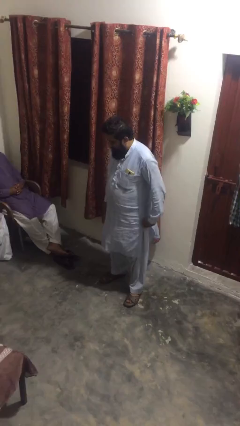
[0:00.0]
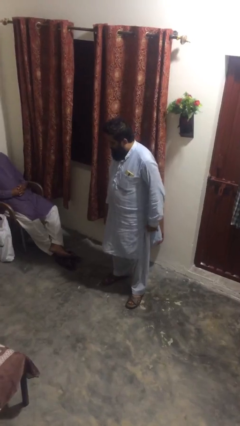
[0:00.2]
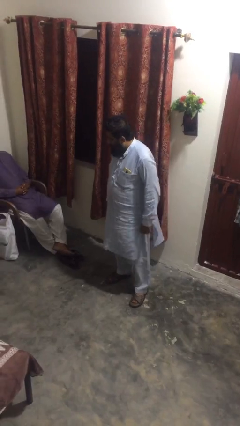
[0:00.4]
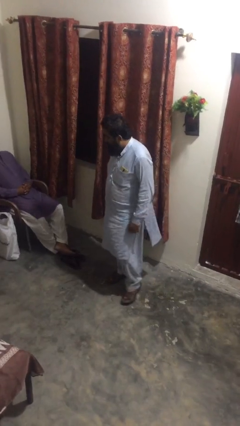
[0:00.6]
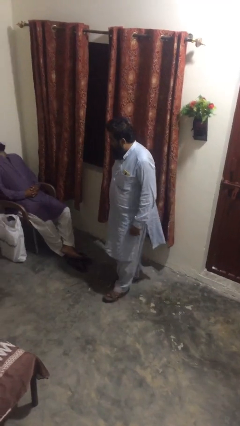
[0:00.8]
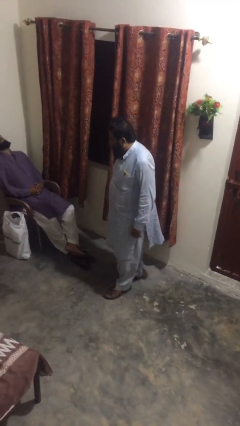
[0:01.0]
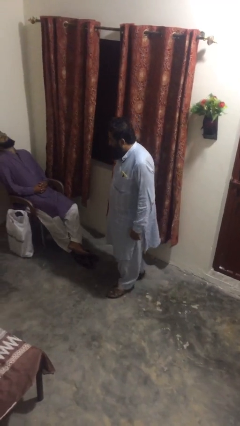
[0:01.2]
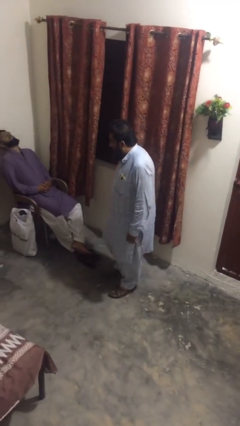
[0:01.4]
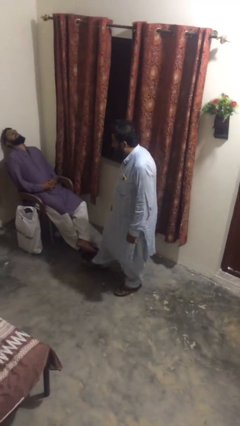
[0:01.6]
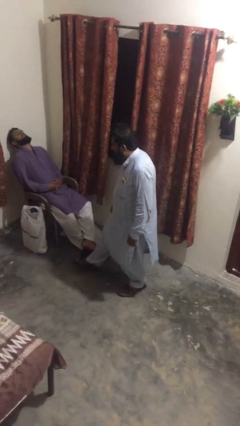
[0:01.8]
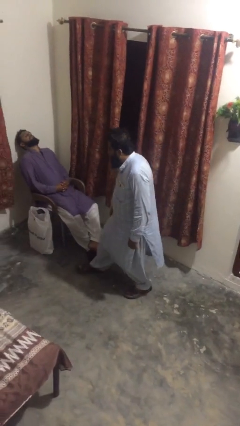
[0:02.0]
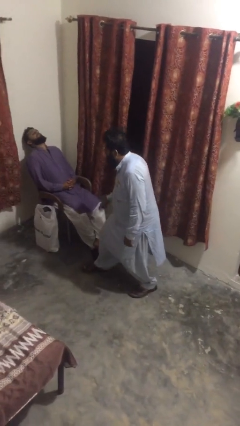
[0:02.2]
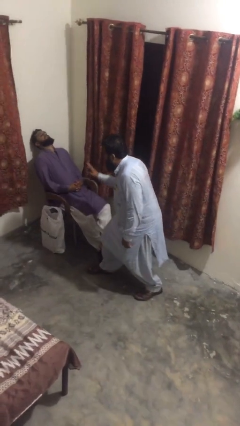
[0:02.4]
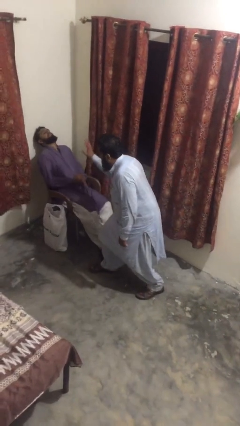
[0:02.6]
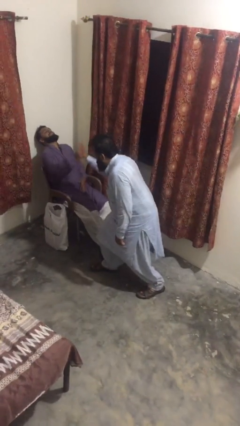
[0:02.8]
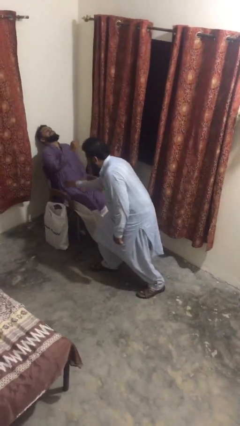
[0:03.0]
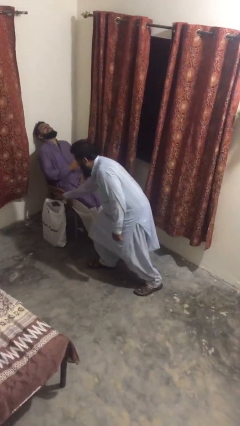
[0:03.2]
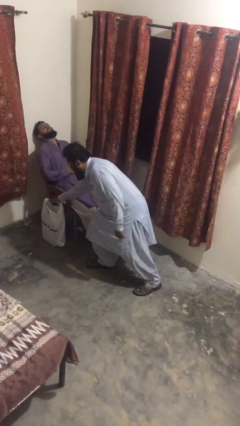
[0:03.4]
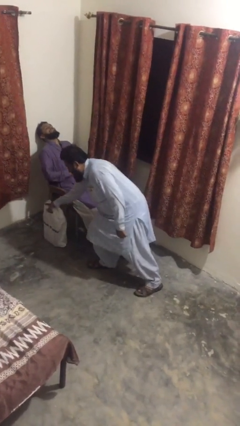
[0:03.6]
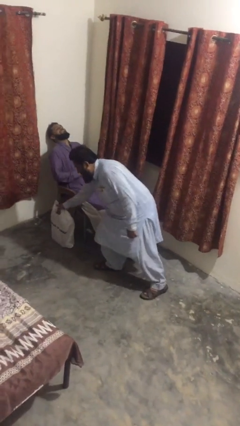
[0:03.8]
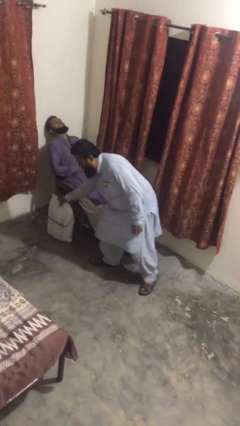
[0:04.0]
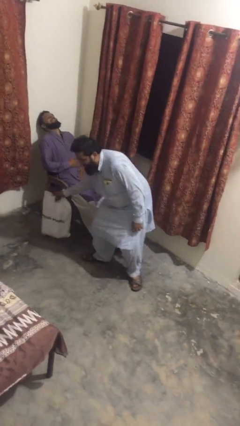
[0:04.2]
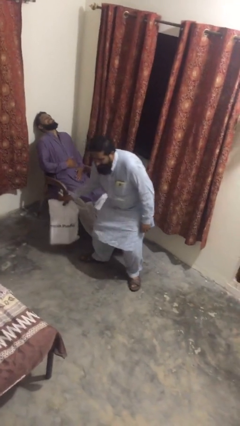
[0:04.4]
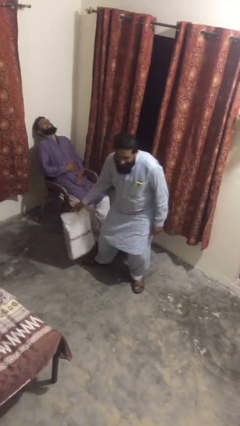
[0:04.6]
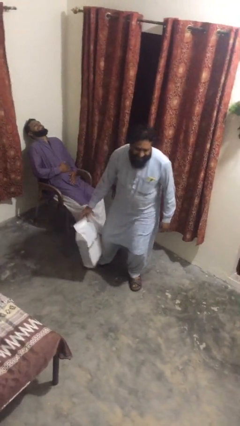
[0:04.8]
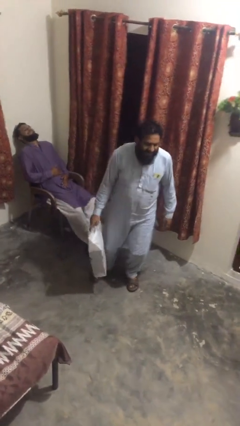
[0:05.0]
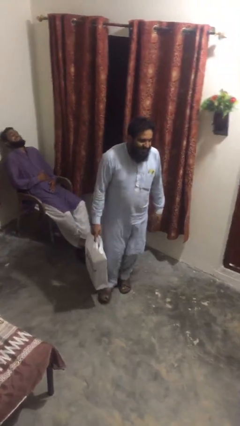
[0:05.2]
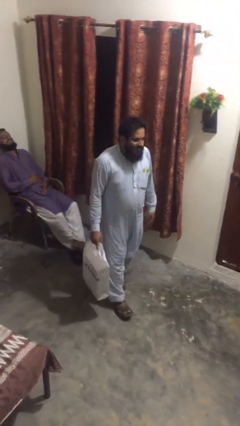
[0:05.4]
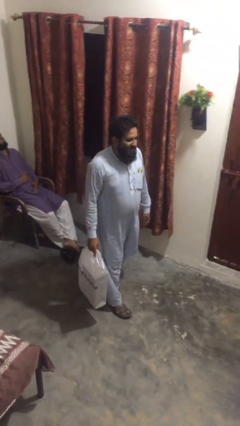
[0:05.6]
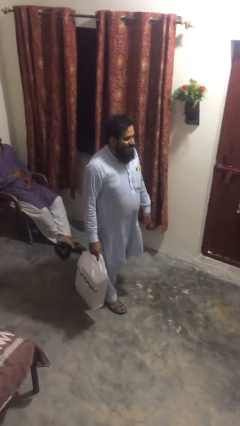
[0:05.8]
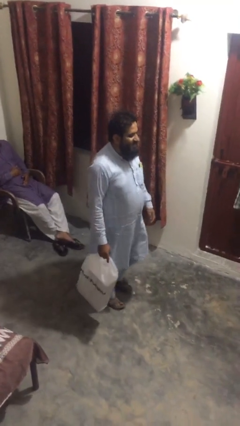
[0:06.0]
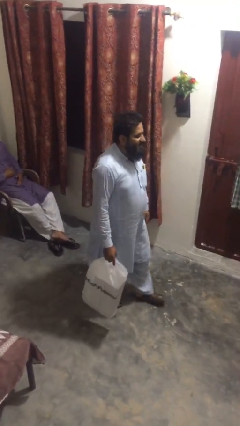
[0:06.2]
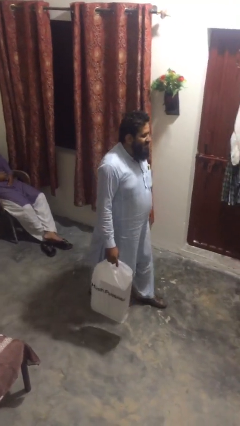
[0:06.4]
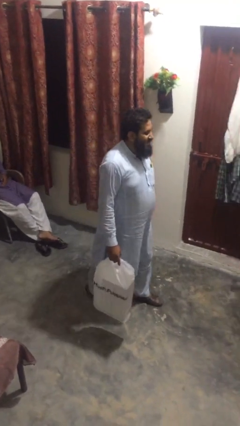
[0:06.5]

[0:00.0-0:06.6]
person steals object from person

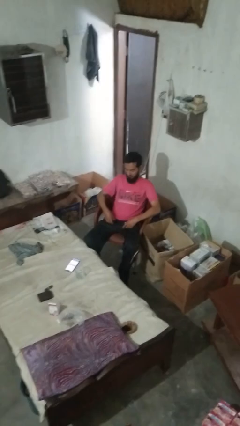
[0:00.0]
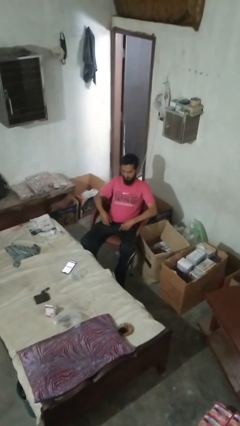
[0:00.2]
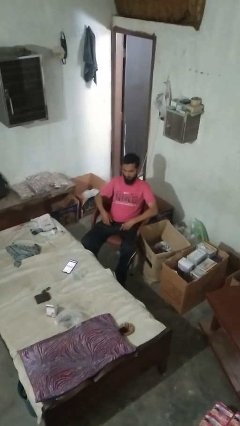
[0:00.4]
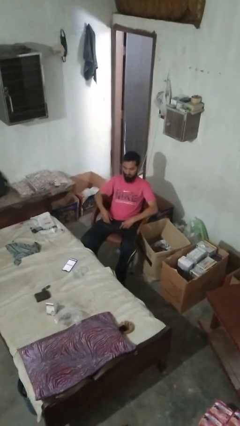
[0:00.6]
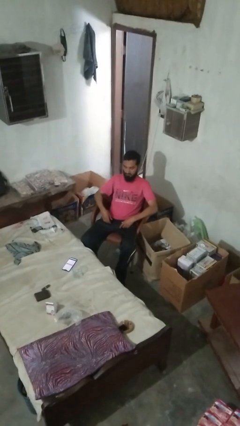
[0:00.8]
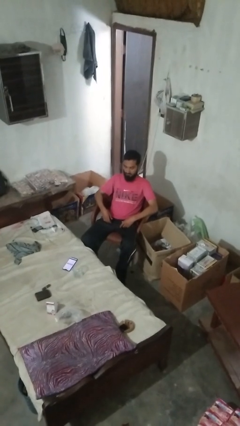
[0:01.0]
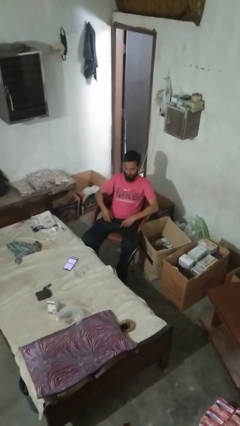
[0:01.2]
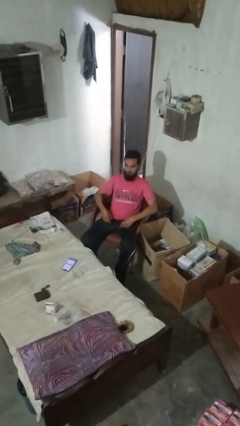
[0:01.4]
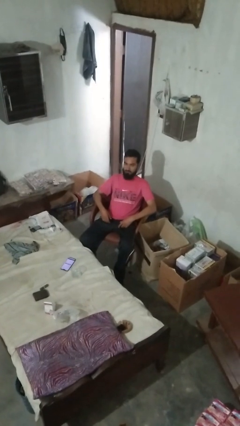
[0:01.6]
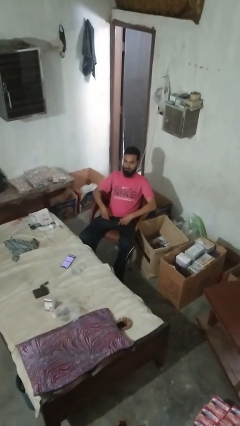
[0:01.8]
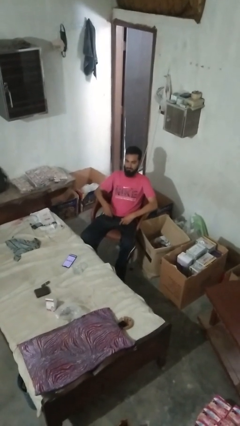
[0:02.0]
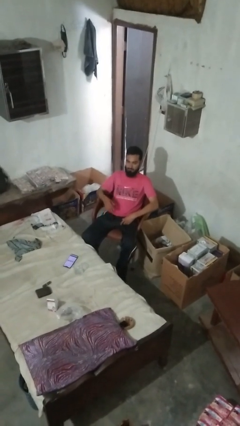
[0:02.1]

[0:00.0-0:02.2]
person nods head

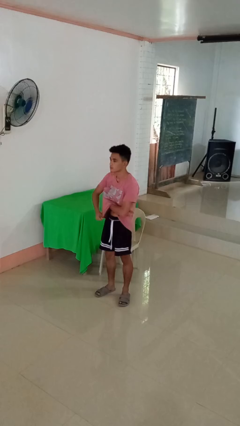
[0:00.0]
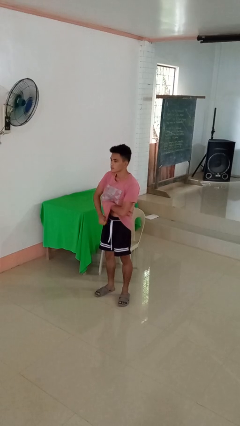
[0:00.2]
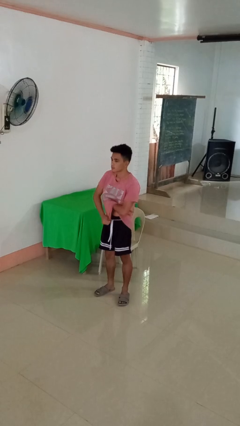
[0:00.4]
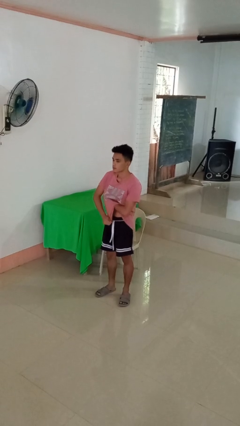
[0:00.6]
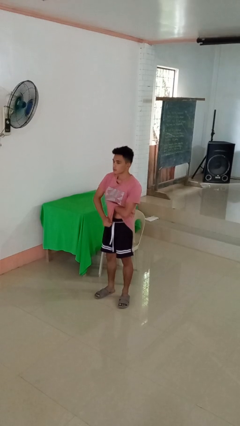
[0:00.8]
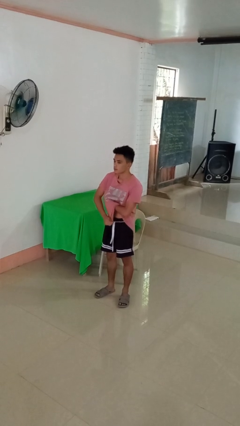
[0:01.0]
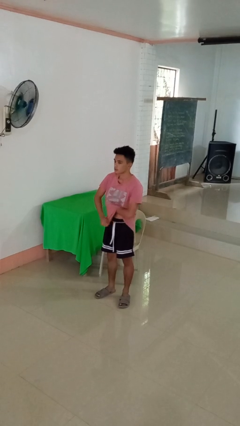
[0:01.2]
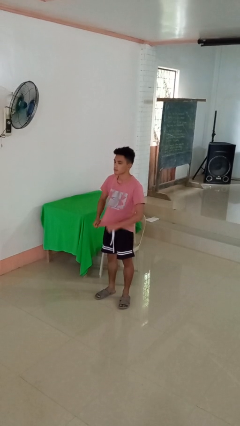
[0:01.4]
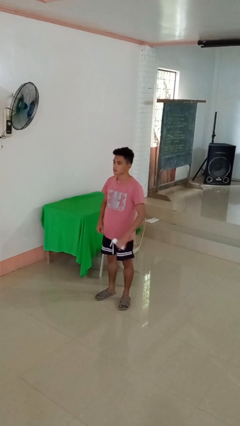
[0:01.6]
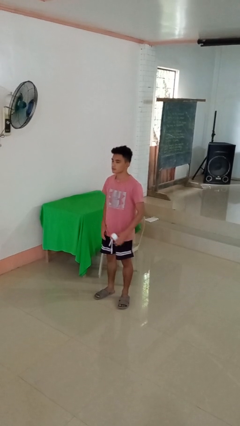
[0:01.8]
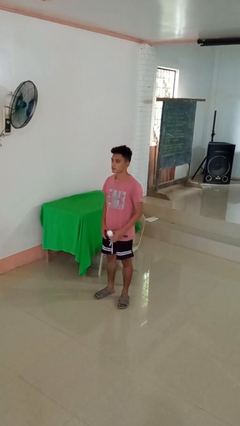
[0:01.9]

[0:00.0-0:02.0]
person applies deodorant

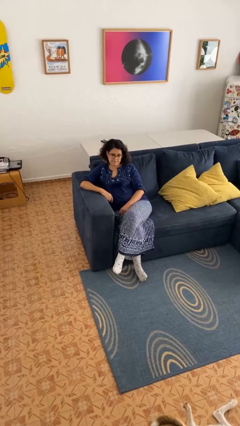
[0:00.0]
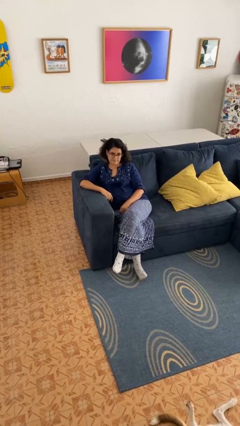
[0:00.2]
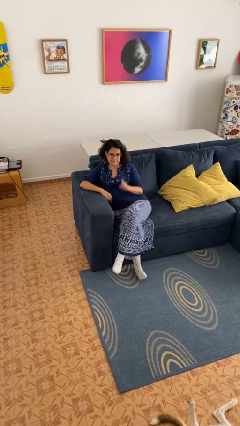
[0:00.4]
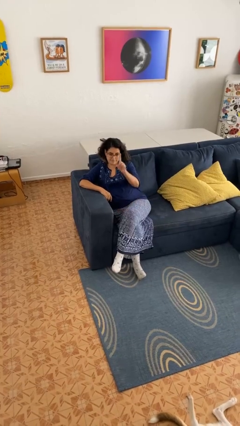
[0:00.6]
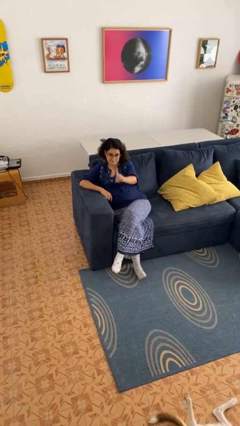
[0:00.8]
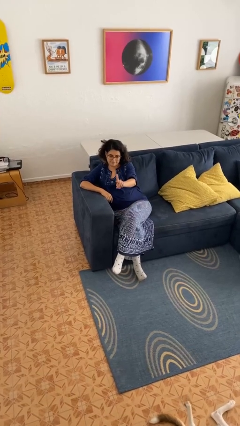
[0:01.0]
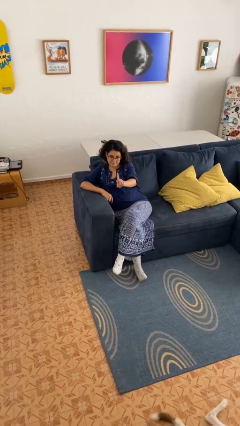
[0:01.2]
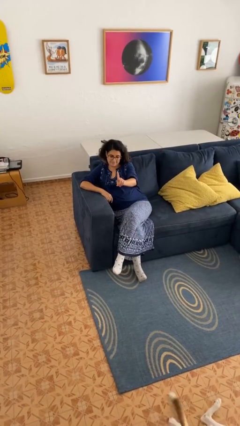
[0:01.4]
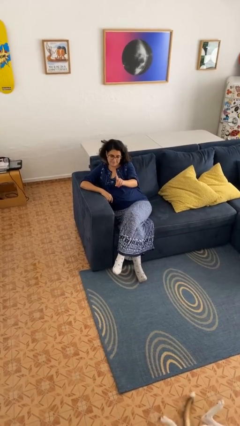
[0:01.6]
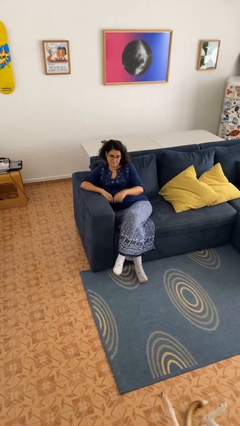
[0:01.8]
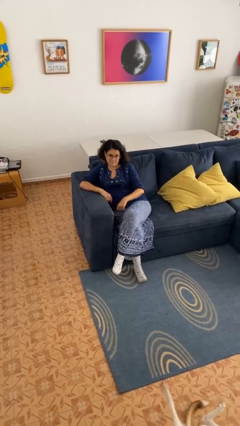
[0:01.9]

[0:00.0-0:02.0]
person gestures number one

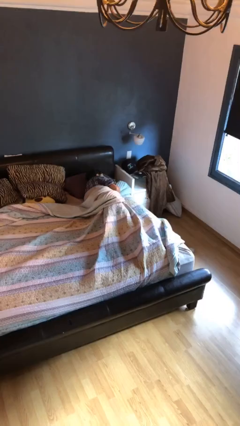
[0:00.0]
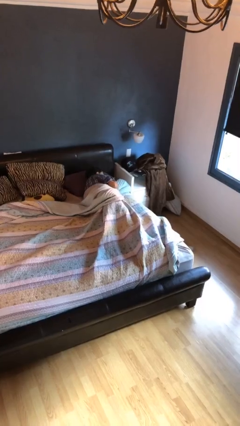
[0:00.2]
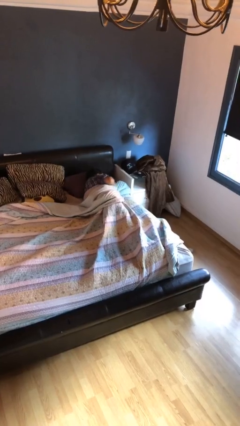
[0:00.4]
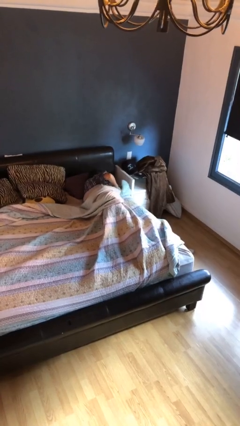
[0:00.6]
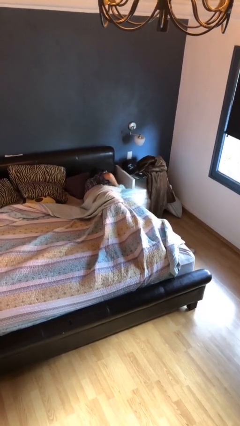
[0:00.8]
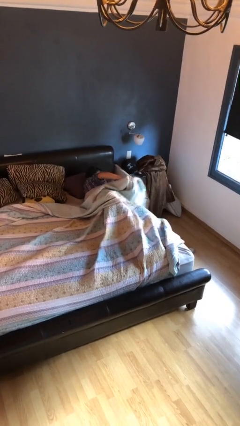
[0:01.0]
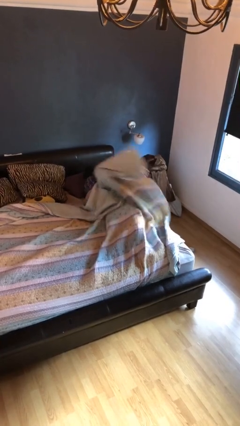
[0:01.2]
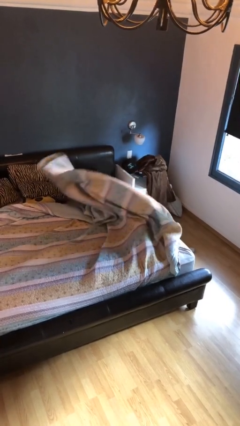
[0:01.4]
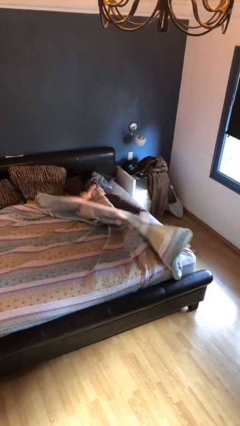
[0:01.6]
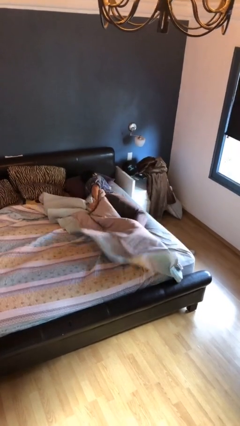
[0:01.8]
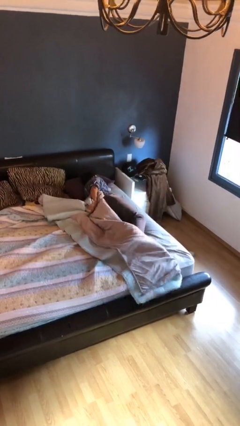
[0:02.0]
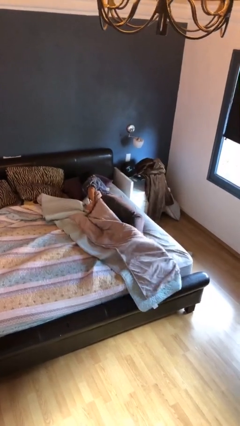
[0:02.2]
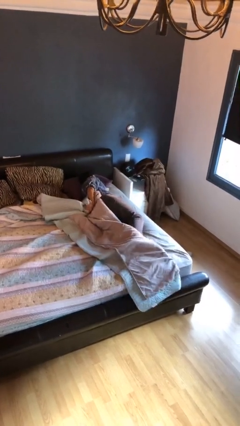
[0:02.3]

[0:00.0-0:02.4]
person uncovers with bedsheets

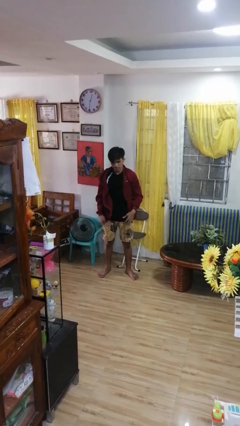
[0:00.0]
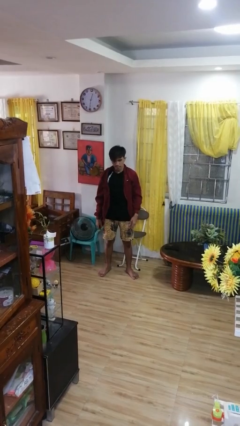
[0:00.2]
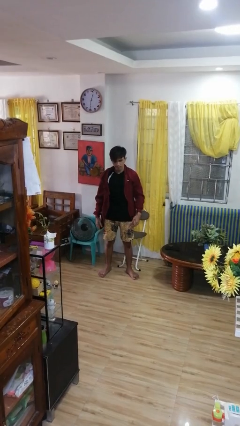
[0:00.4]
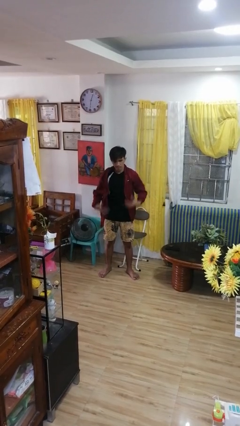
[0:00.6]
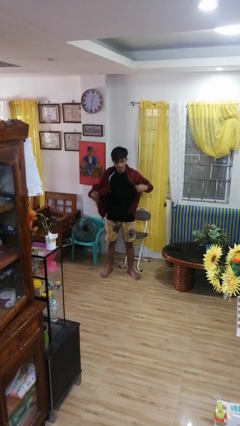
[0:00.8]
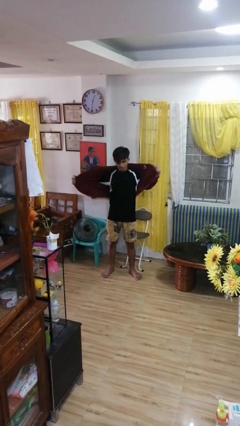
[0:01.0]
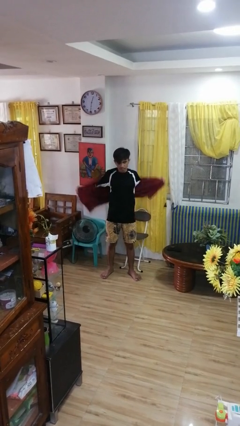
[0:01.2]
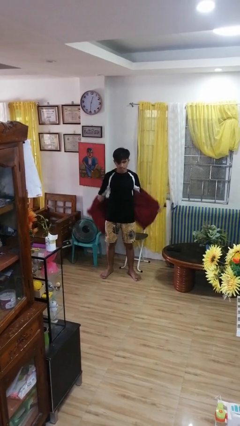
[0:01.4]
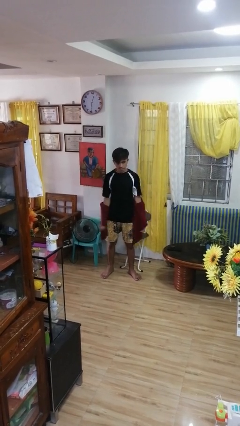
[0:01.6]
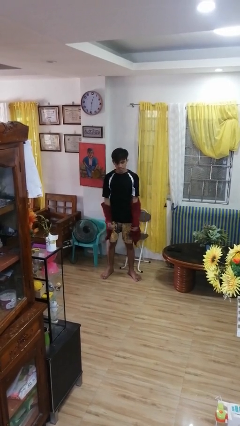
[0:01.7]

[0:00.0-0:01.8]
person takes off jacket
